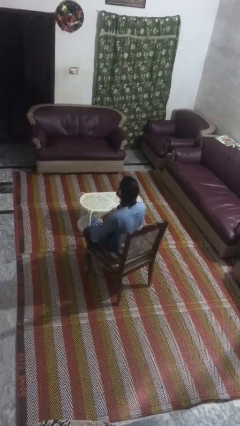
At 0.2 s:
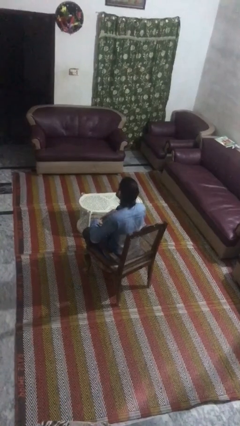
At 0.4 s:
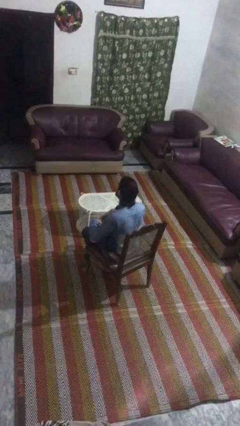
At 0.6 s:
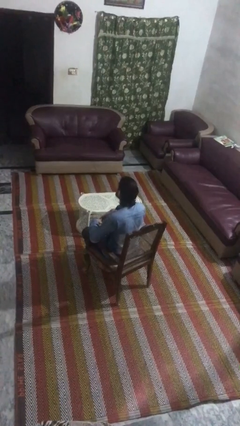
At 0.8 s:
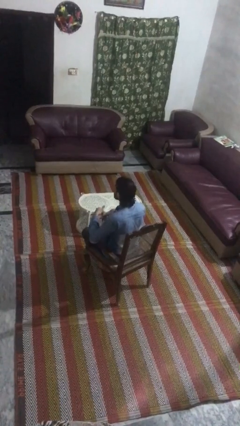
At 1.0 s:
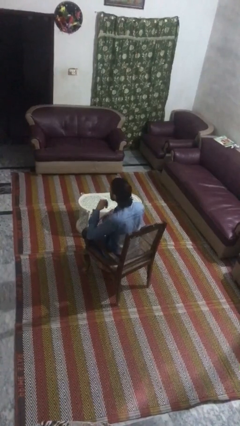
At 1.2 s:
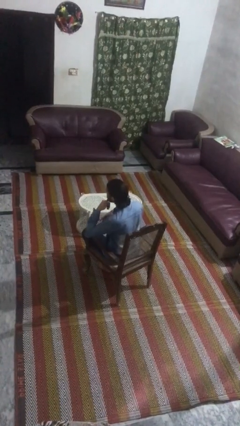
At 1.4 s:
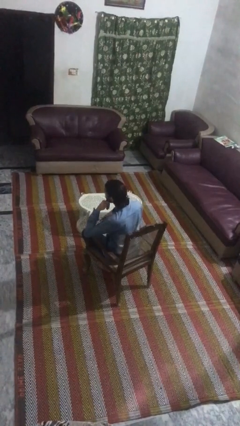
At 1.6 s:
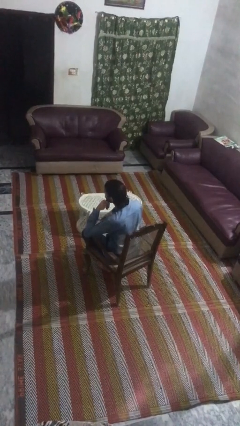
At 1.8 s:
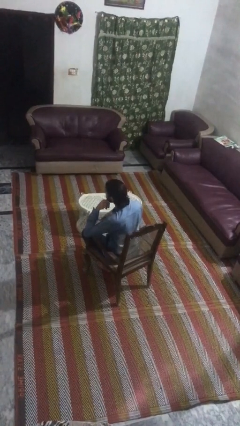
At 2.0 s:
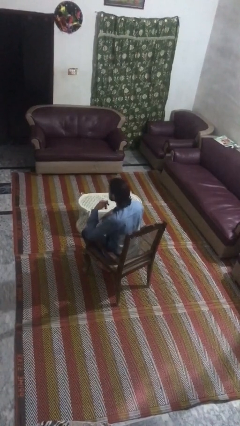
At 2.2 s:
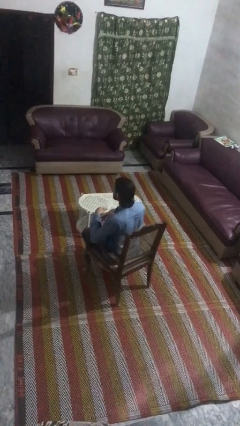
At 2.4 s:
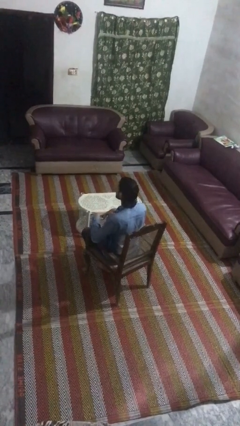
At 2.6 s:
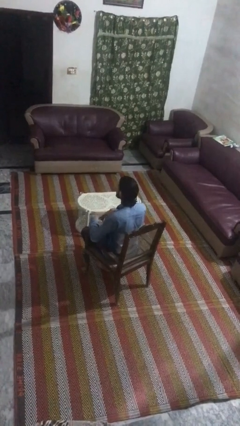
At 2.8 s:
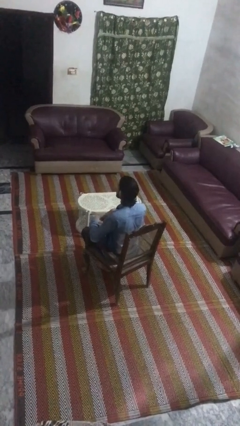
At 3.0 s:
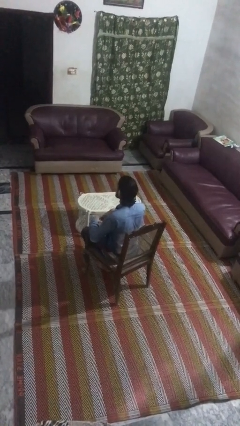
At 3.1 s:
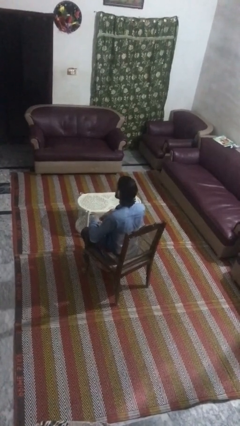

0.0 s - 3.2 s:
person gestures call me

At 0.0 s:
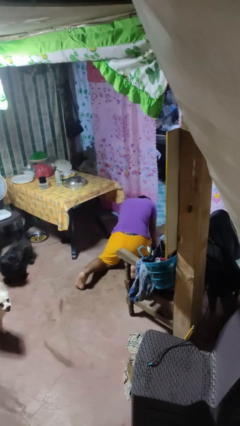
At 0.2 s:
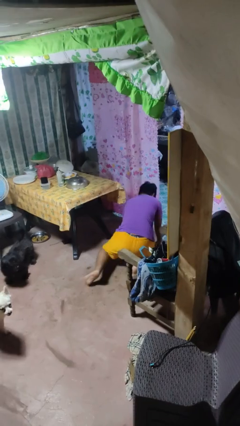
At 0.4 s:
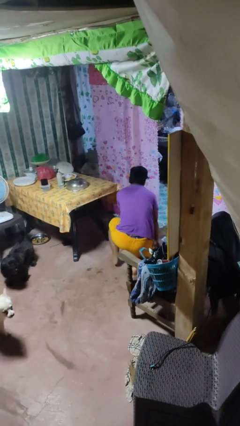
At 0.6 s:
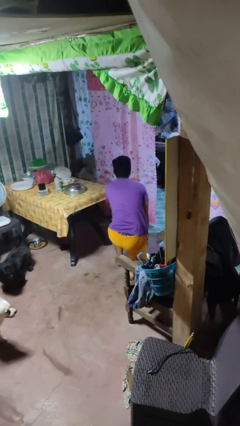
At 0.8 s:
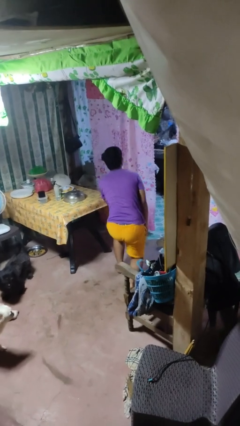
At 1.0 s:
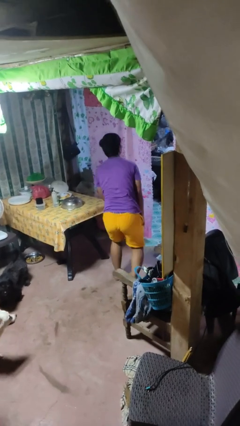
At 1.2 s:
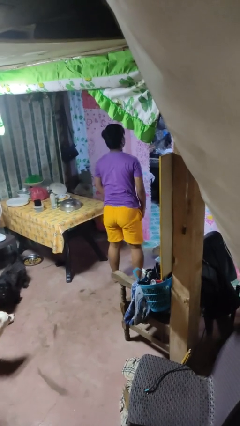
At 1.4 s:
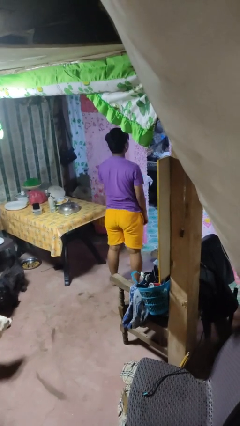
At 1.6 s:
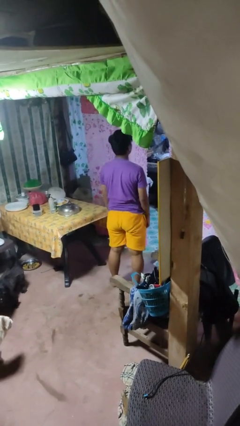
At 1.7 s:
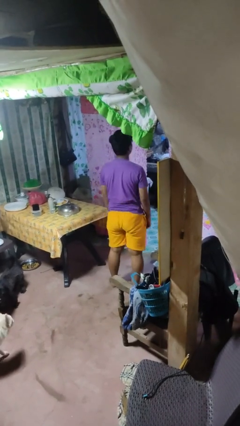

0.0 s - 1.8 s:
person stands up from floor

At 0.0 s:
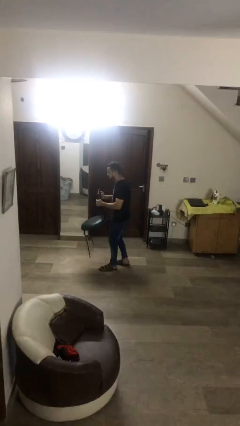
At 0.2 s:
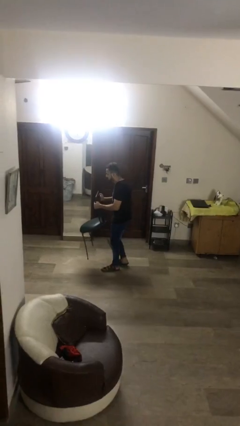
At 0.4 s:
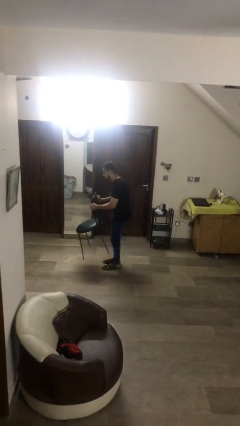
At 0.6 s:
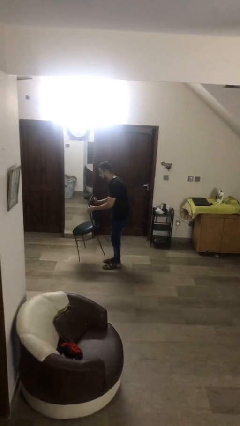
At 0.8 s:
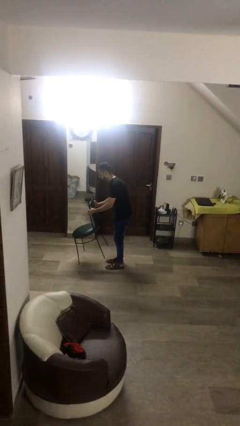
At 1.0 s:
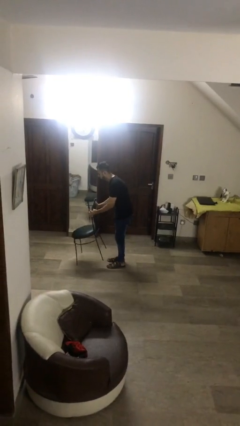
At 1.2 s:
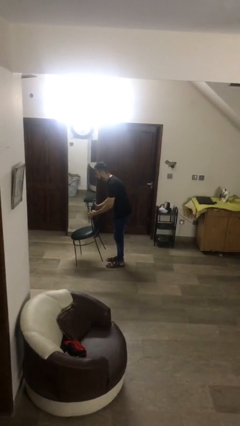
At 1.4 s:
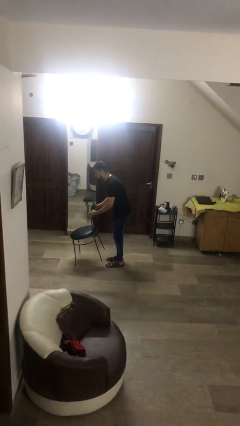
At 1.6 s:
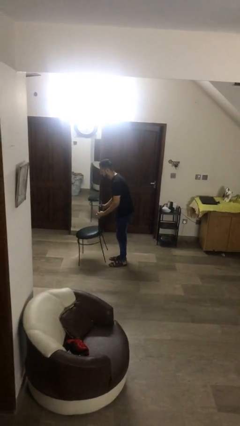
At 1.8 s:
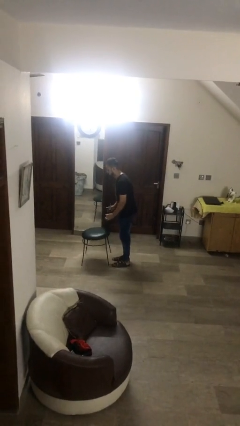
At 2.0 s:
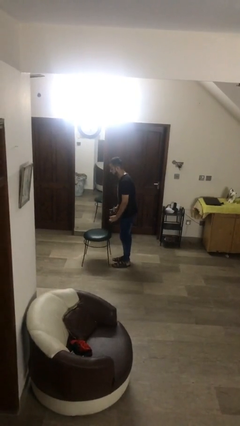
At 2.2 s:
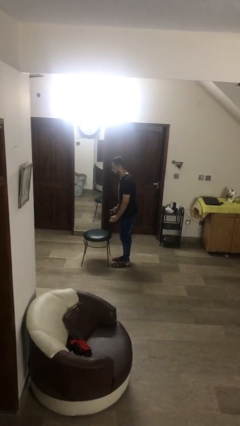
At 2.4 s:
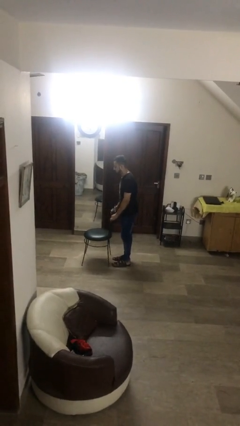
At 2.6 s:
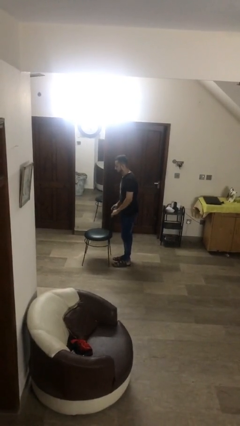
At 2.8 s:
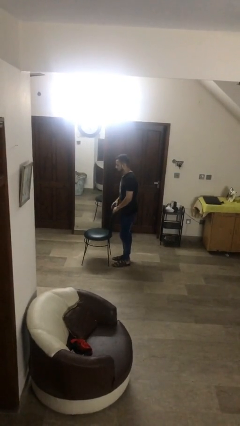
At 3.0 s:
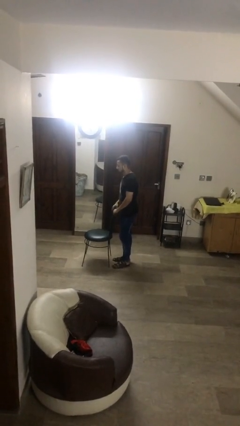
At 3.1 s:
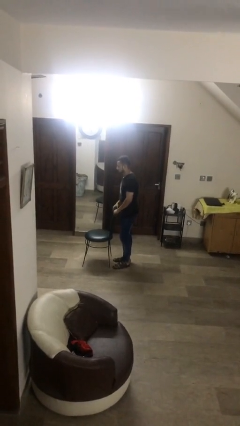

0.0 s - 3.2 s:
person puts down object on floor

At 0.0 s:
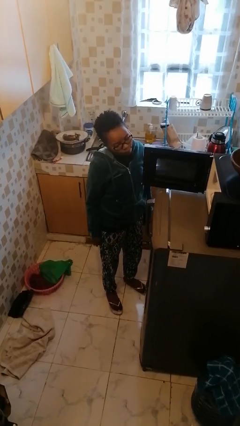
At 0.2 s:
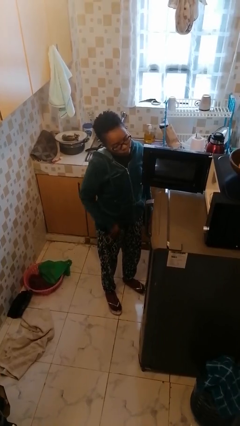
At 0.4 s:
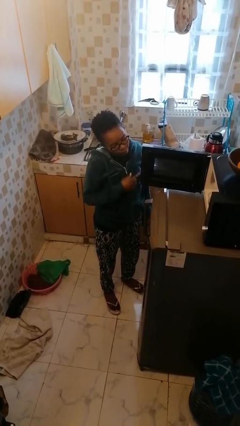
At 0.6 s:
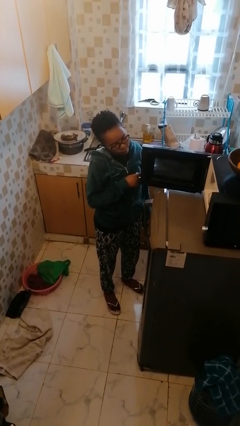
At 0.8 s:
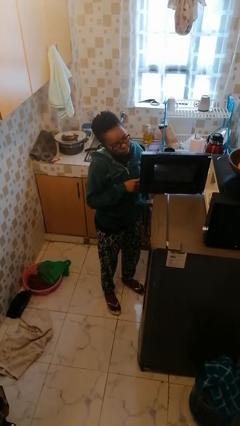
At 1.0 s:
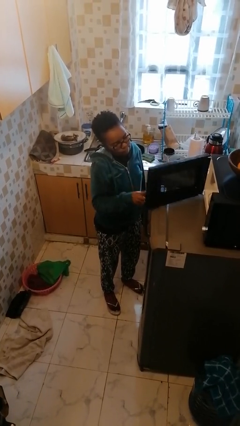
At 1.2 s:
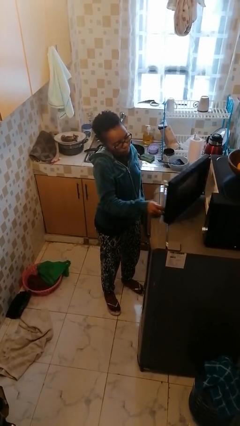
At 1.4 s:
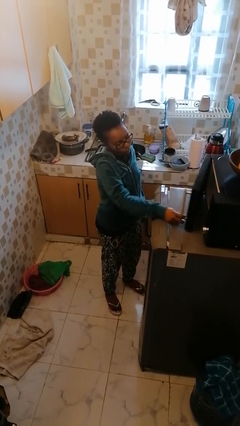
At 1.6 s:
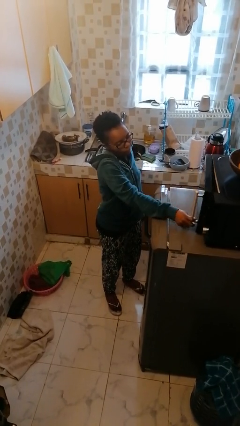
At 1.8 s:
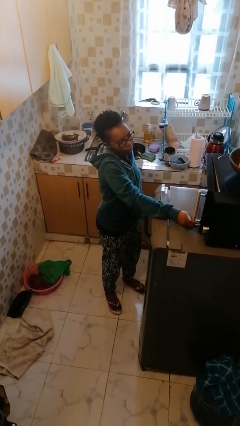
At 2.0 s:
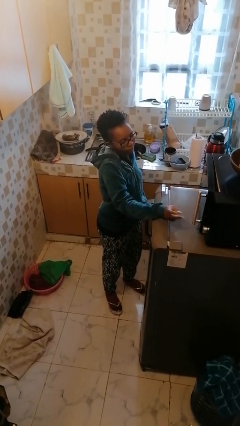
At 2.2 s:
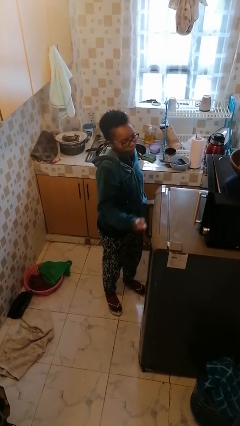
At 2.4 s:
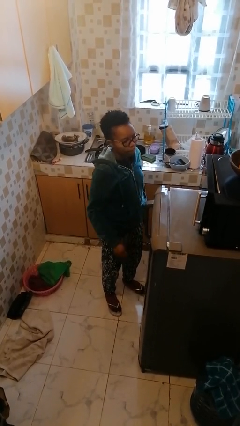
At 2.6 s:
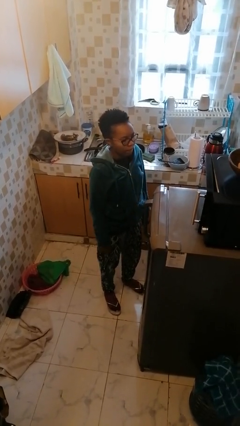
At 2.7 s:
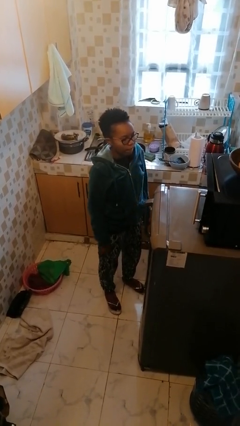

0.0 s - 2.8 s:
person closes microwave

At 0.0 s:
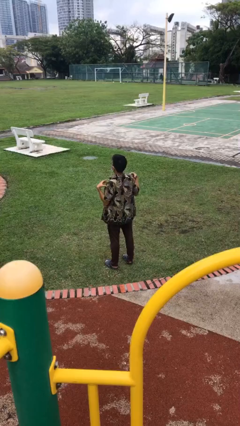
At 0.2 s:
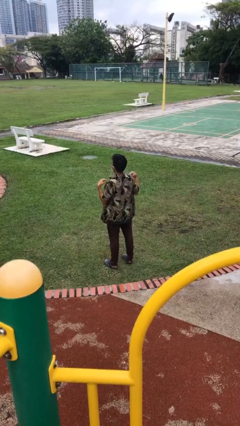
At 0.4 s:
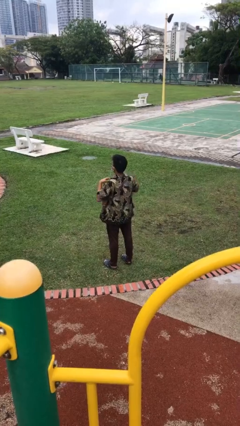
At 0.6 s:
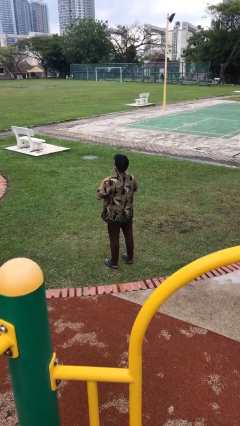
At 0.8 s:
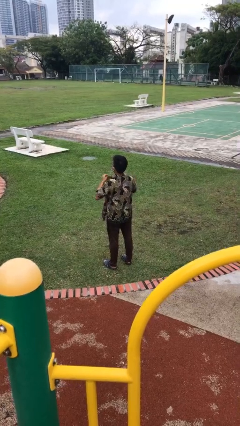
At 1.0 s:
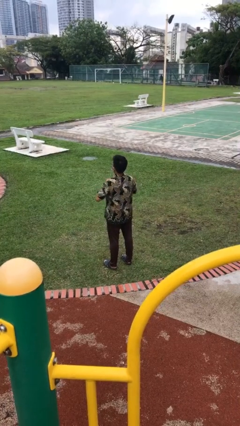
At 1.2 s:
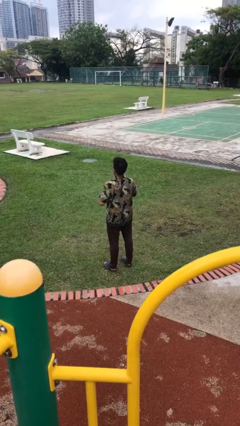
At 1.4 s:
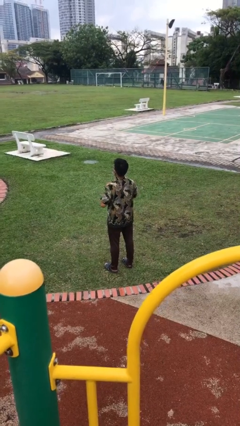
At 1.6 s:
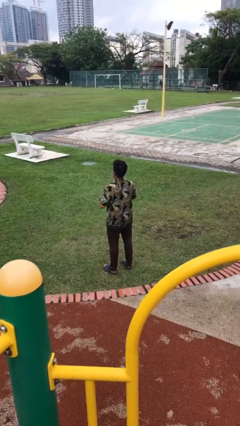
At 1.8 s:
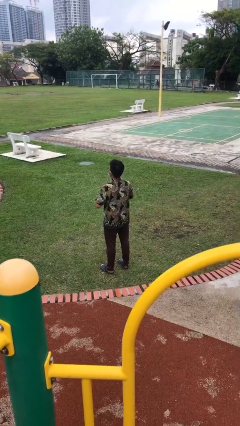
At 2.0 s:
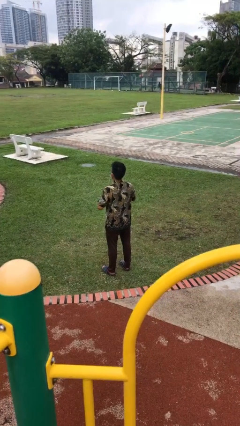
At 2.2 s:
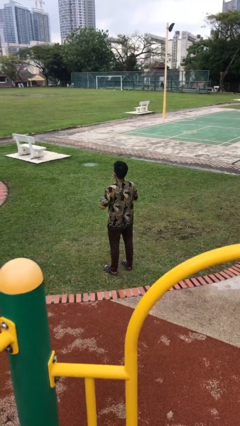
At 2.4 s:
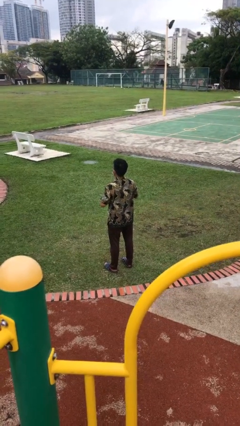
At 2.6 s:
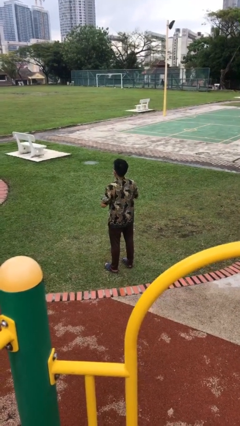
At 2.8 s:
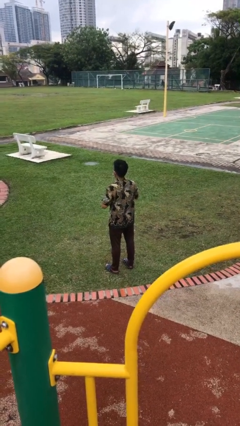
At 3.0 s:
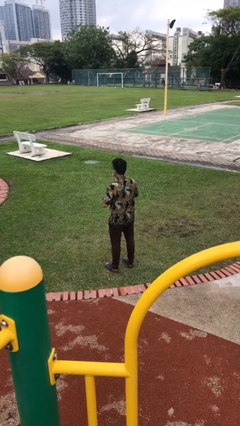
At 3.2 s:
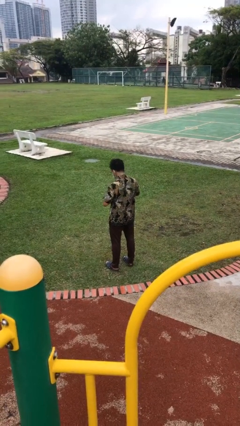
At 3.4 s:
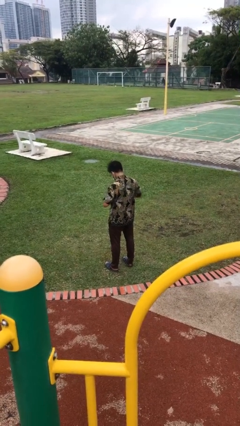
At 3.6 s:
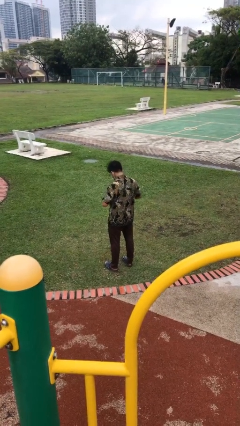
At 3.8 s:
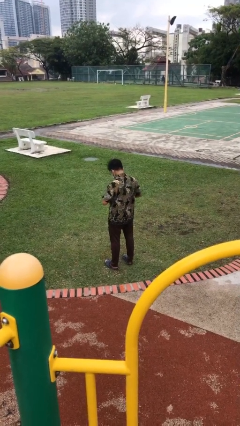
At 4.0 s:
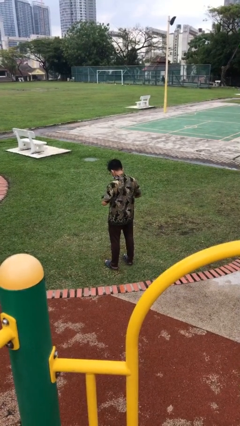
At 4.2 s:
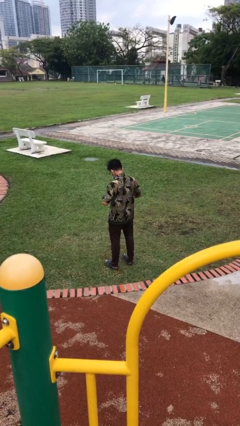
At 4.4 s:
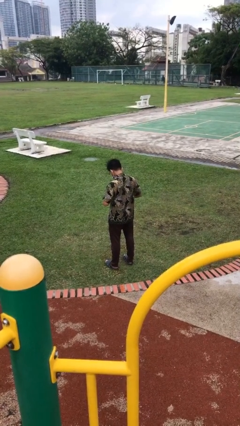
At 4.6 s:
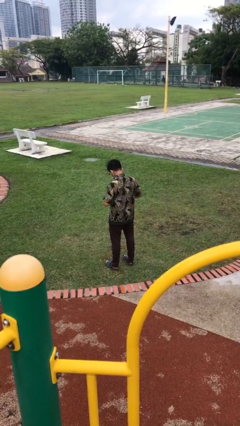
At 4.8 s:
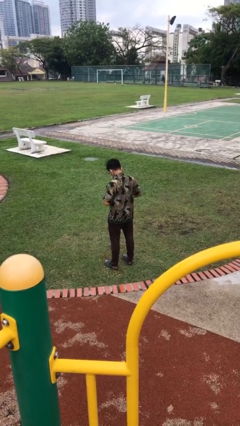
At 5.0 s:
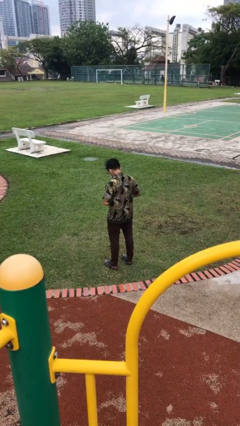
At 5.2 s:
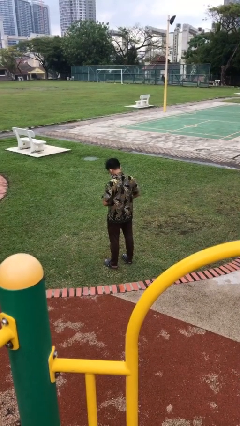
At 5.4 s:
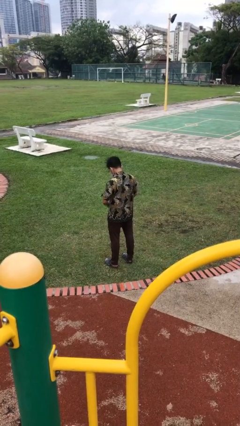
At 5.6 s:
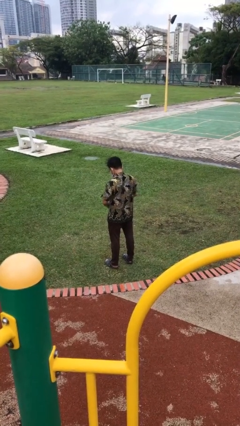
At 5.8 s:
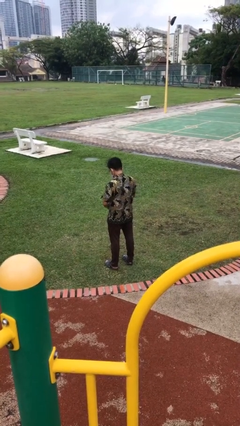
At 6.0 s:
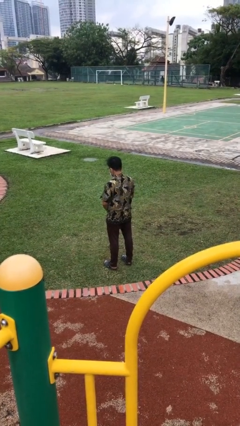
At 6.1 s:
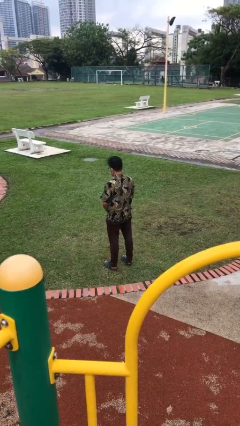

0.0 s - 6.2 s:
person buttons shirt

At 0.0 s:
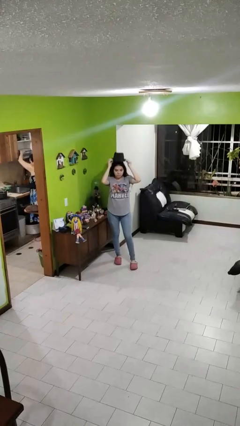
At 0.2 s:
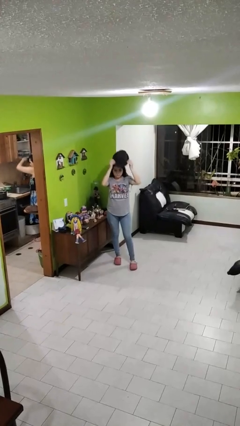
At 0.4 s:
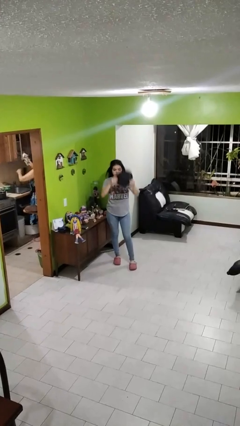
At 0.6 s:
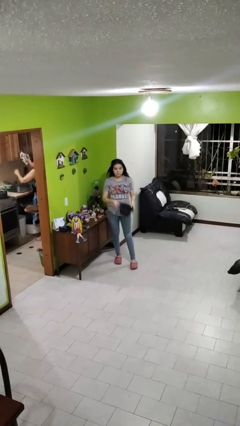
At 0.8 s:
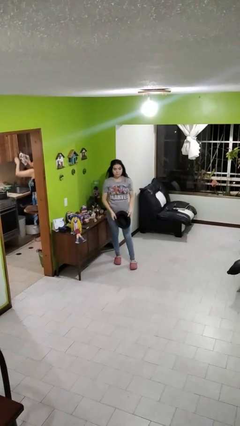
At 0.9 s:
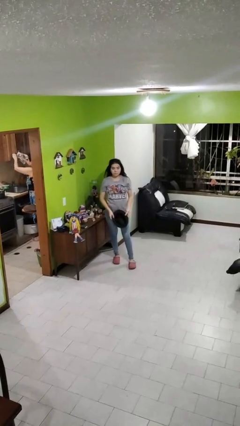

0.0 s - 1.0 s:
person takes off hat
